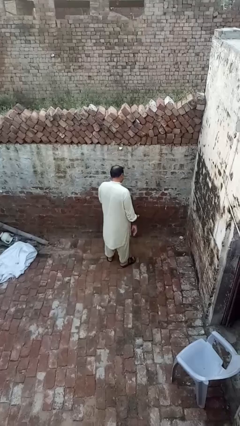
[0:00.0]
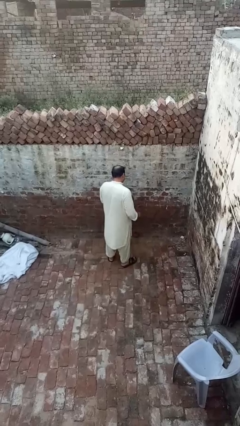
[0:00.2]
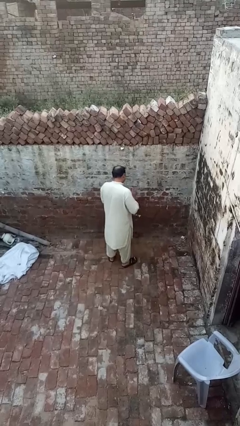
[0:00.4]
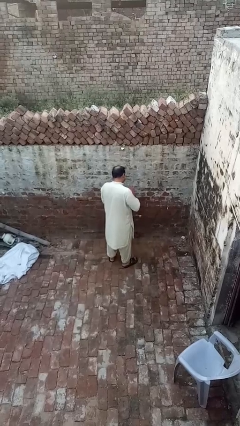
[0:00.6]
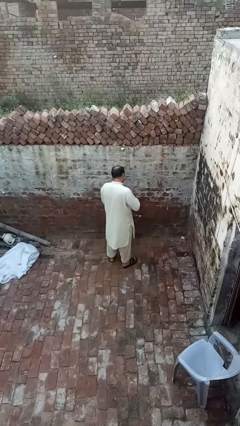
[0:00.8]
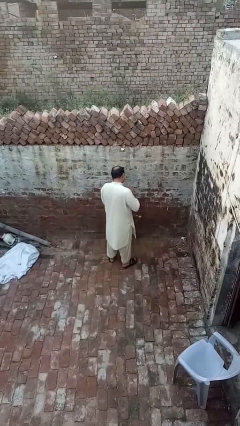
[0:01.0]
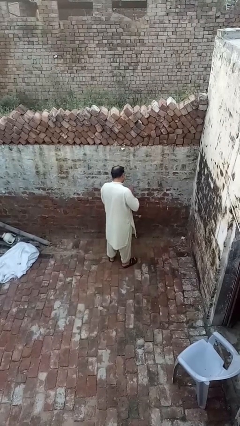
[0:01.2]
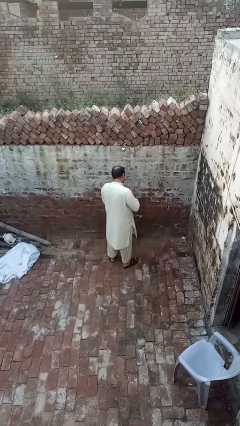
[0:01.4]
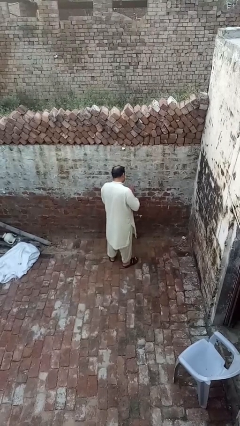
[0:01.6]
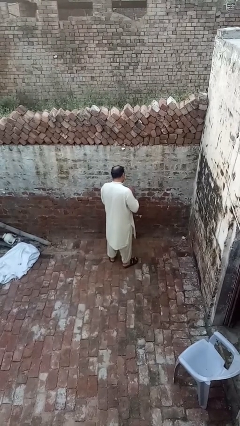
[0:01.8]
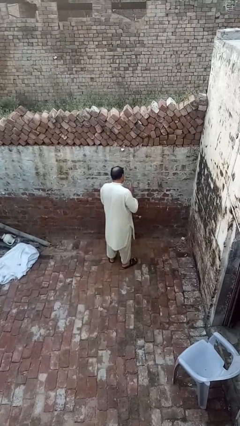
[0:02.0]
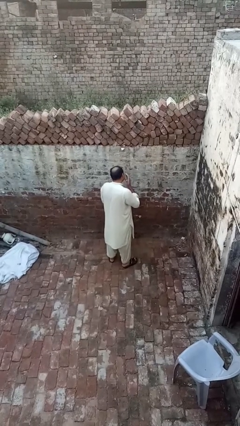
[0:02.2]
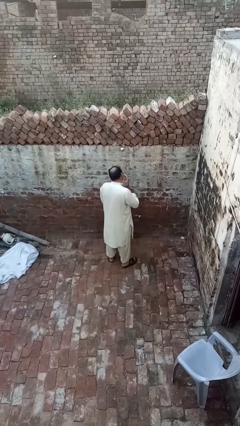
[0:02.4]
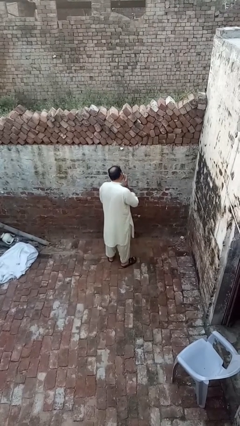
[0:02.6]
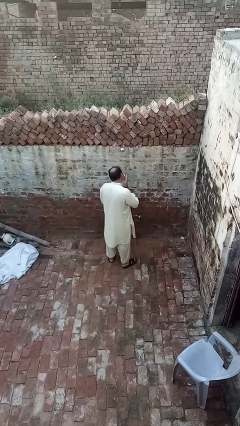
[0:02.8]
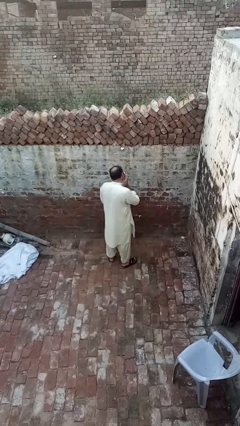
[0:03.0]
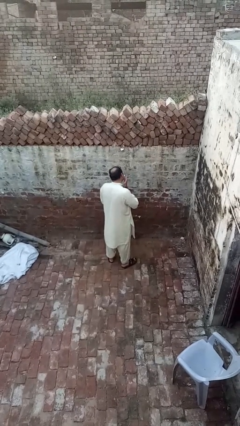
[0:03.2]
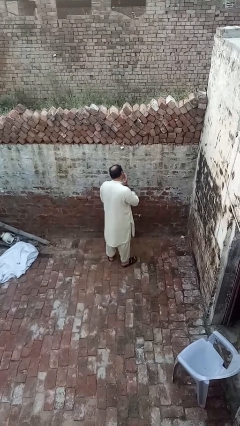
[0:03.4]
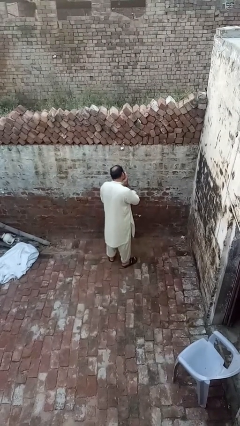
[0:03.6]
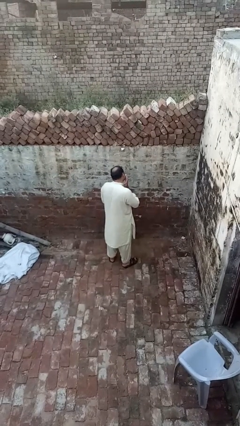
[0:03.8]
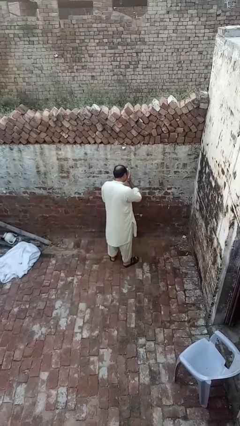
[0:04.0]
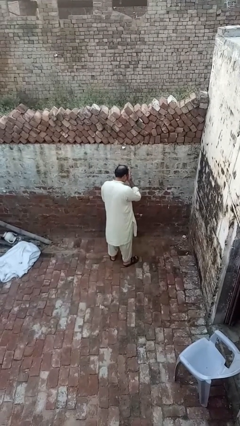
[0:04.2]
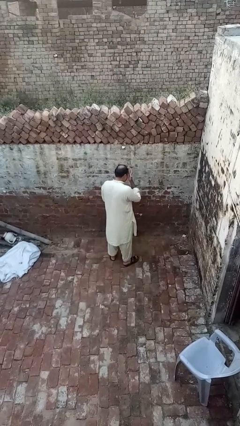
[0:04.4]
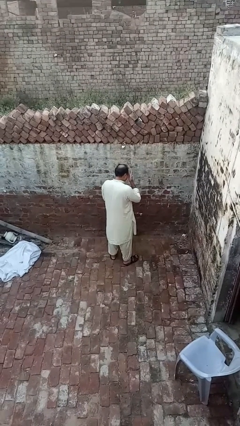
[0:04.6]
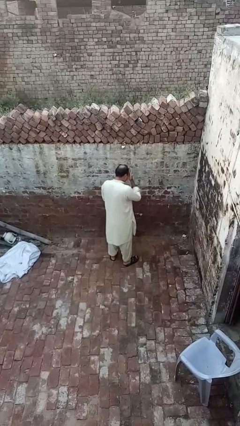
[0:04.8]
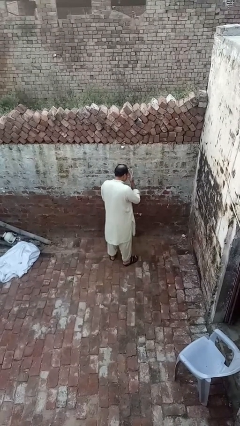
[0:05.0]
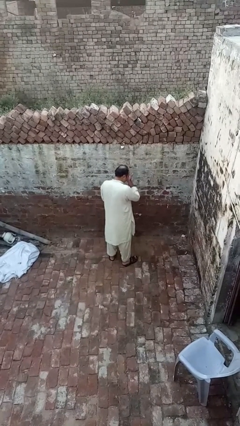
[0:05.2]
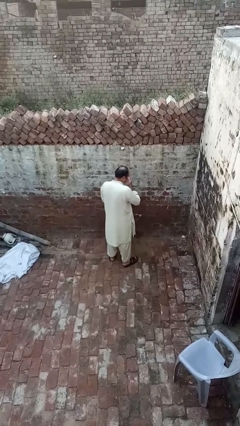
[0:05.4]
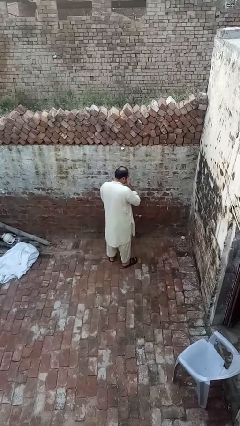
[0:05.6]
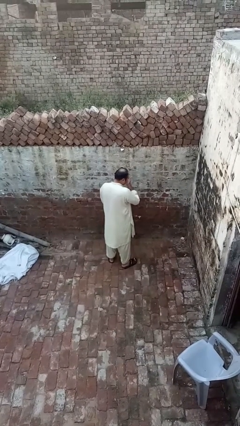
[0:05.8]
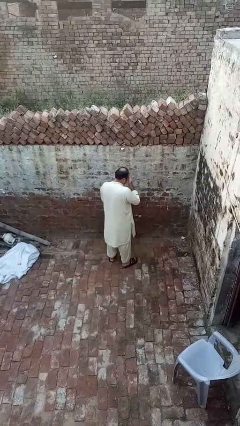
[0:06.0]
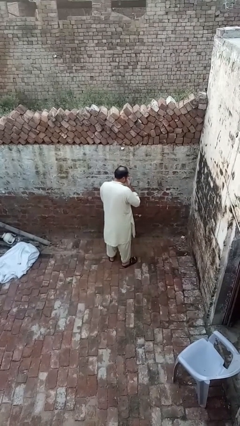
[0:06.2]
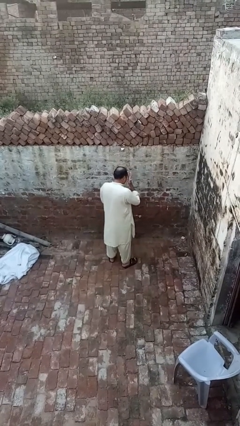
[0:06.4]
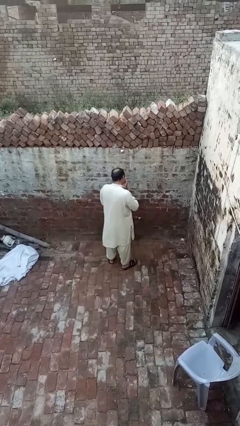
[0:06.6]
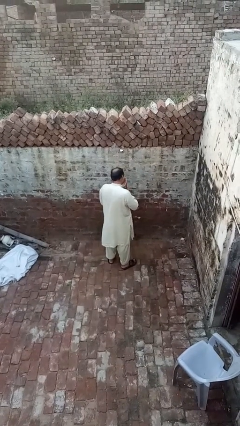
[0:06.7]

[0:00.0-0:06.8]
person applies facial moisturizer

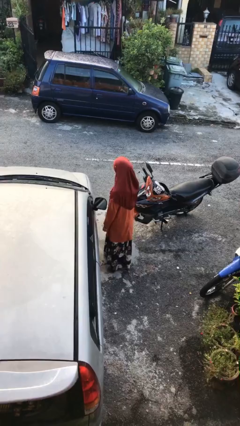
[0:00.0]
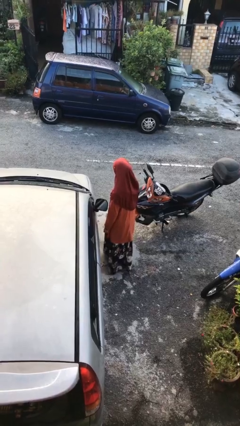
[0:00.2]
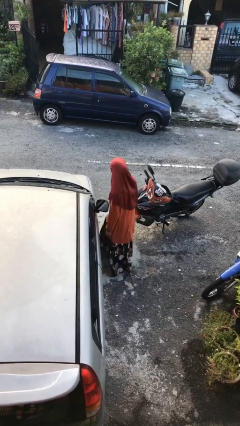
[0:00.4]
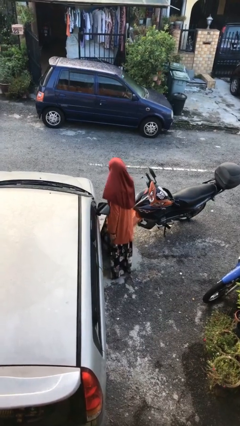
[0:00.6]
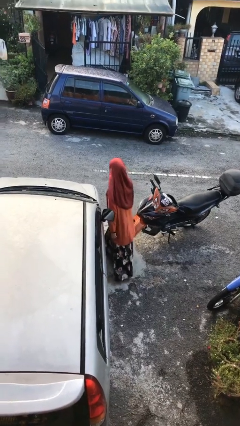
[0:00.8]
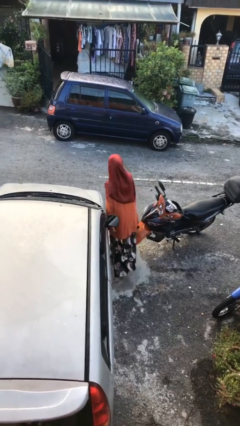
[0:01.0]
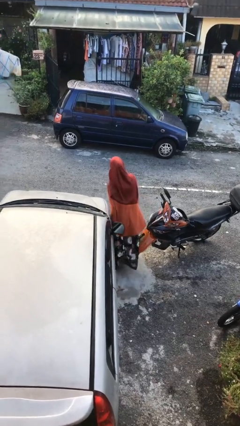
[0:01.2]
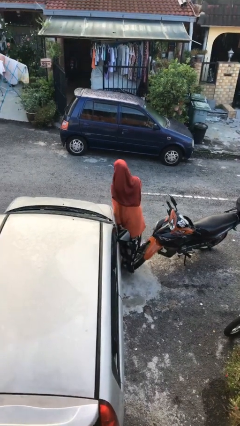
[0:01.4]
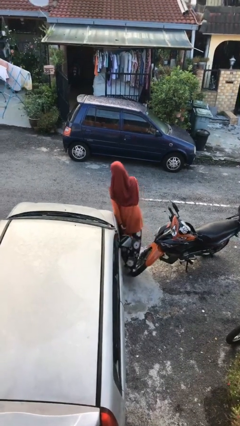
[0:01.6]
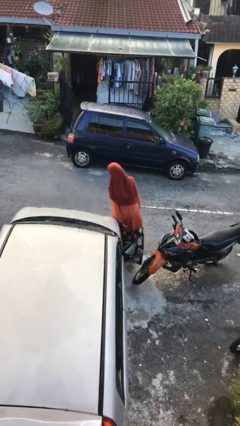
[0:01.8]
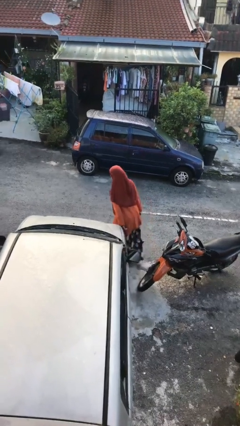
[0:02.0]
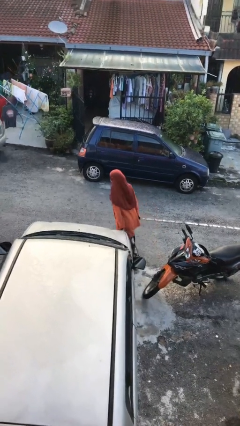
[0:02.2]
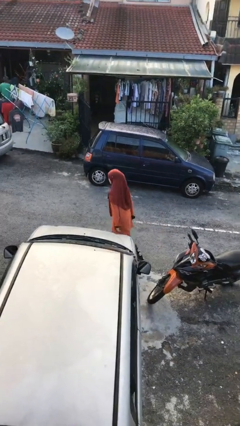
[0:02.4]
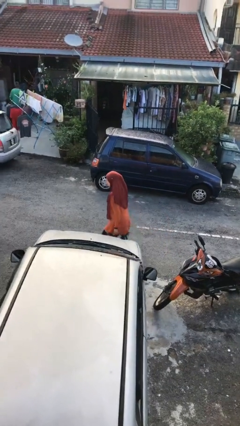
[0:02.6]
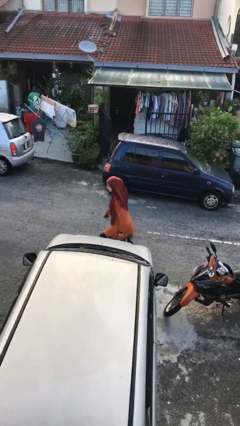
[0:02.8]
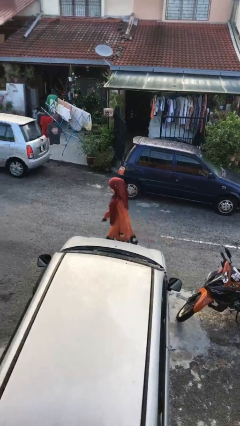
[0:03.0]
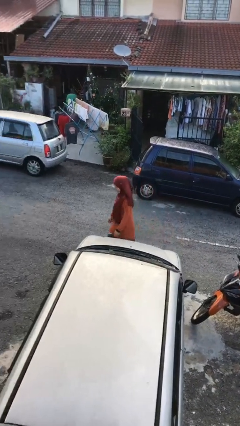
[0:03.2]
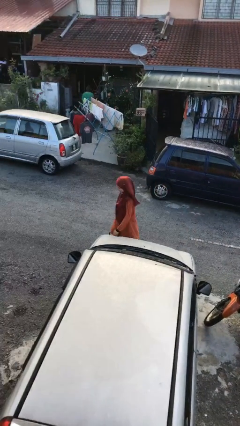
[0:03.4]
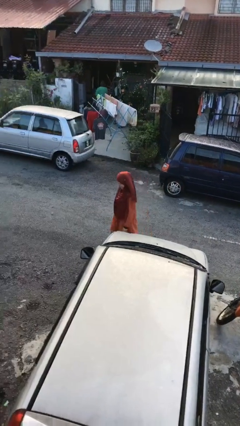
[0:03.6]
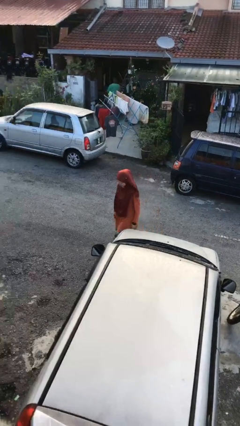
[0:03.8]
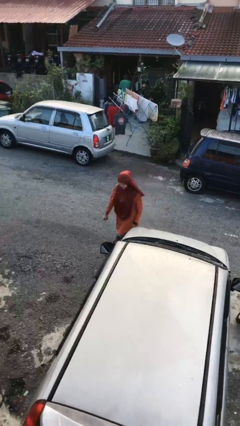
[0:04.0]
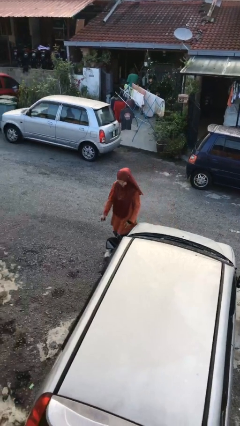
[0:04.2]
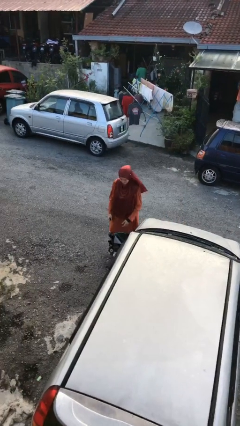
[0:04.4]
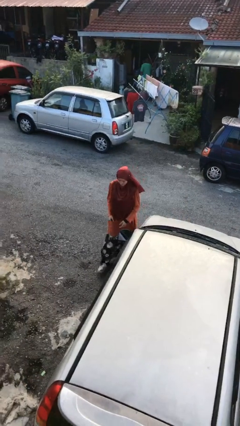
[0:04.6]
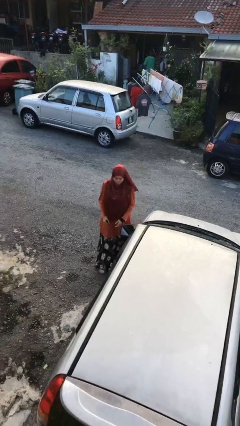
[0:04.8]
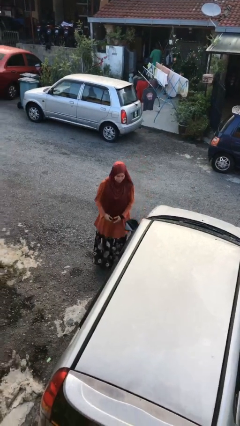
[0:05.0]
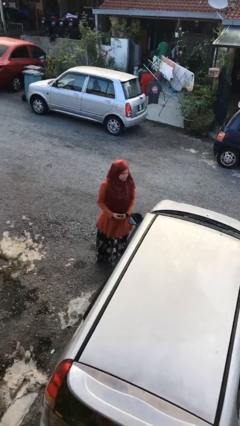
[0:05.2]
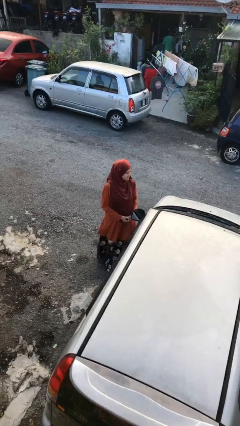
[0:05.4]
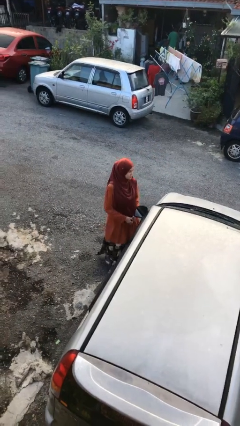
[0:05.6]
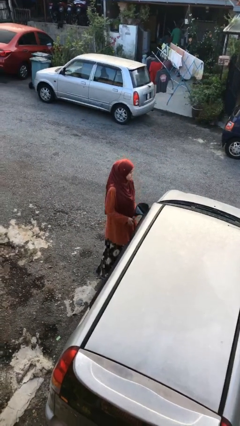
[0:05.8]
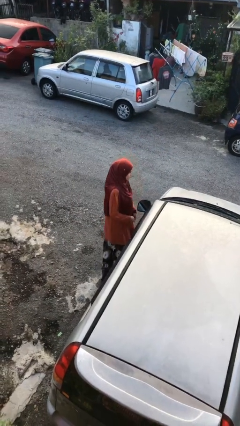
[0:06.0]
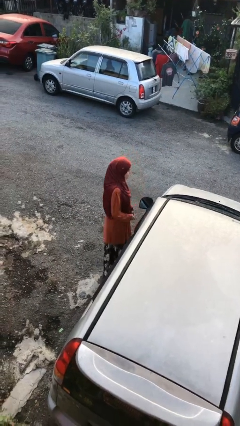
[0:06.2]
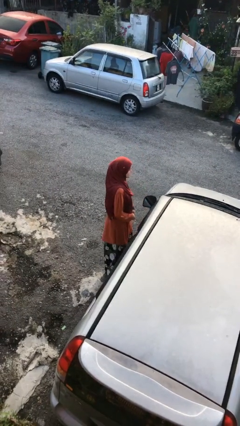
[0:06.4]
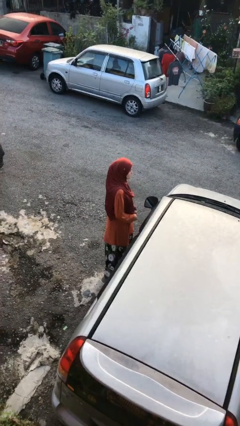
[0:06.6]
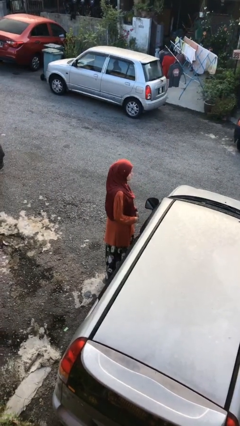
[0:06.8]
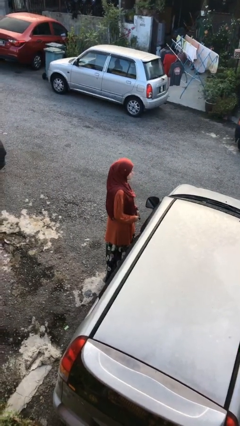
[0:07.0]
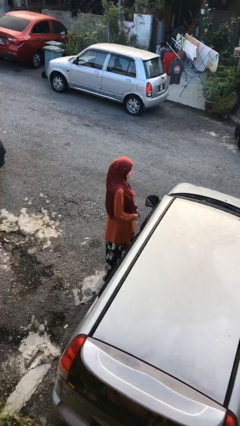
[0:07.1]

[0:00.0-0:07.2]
person walks around car

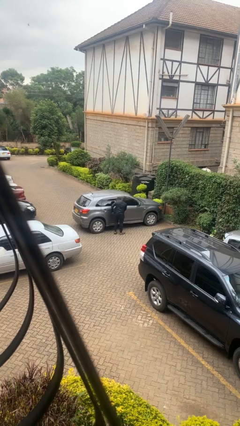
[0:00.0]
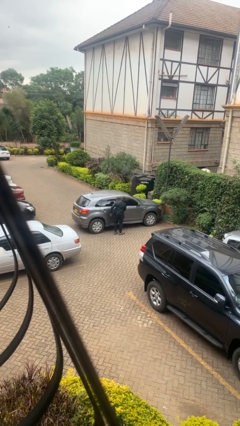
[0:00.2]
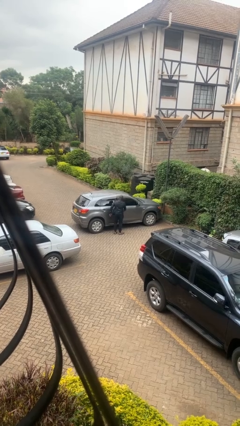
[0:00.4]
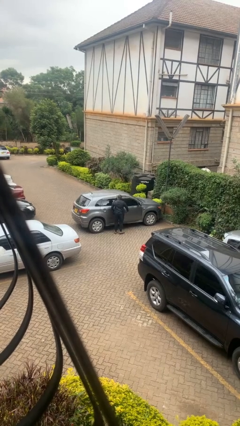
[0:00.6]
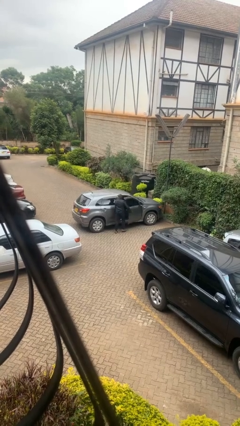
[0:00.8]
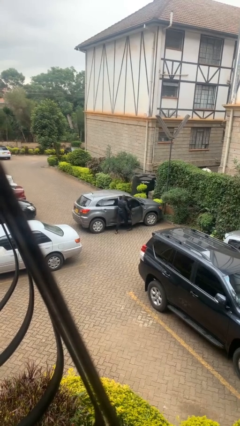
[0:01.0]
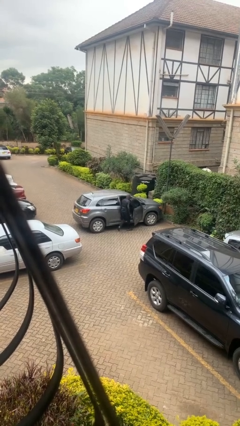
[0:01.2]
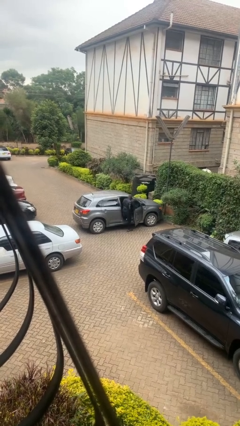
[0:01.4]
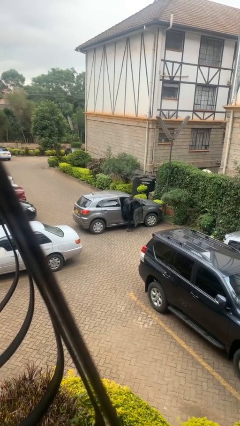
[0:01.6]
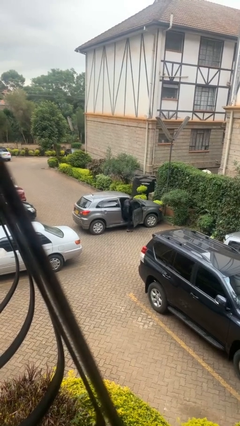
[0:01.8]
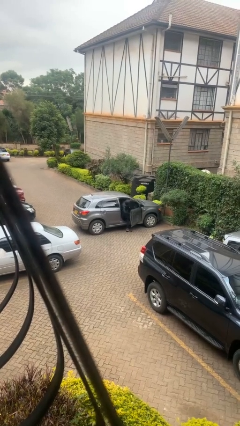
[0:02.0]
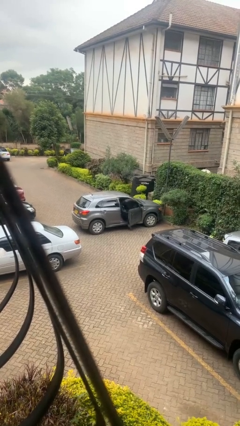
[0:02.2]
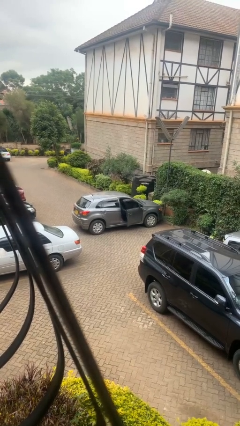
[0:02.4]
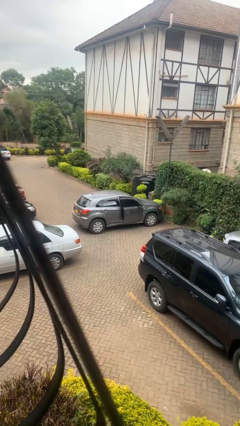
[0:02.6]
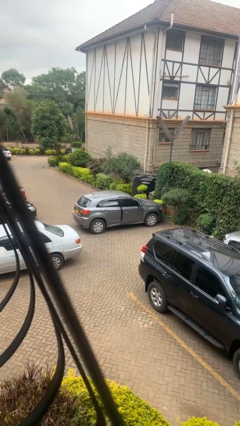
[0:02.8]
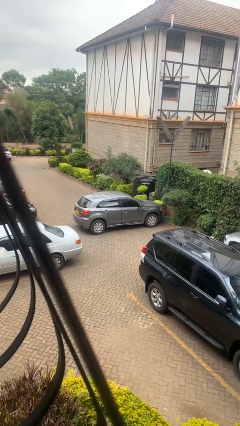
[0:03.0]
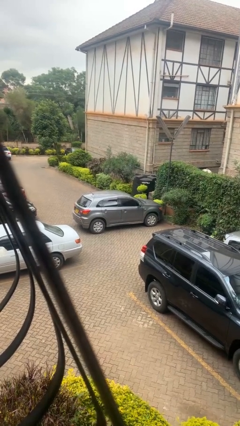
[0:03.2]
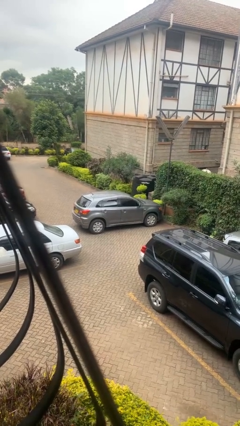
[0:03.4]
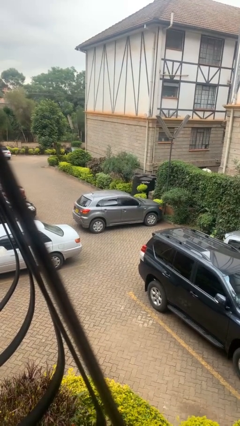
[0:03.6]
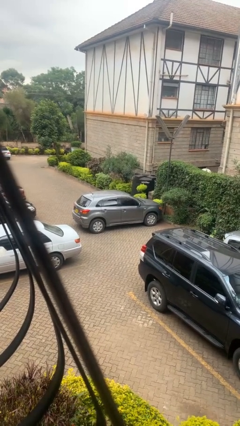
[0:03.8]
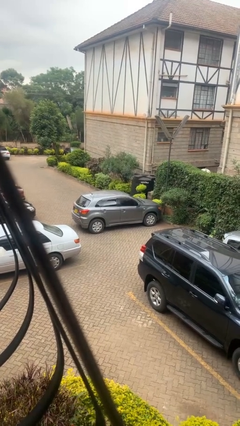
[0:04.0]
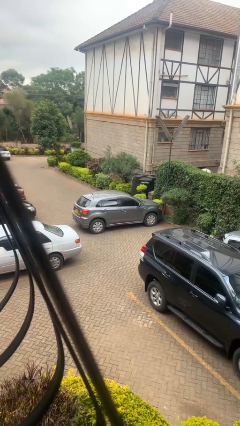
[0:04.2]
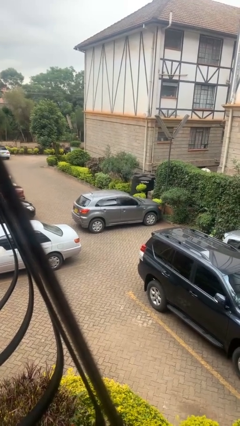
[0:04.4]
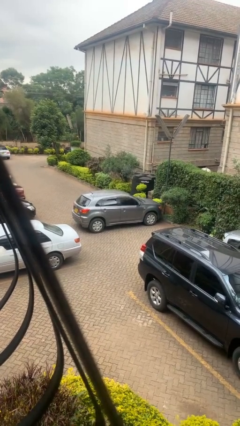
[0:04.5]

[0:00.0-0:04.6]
car picks up person
